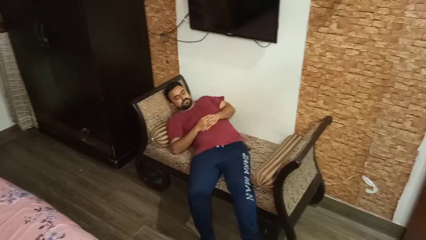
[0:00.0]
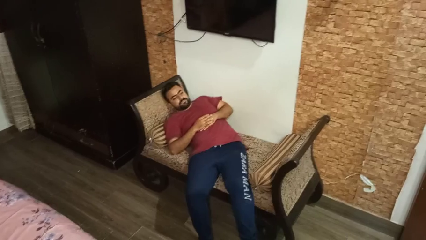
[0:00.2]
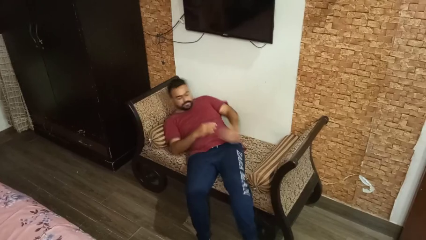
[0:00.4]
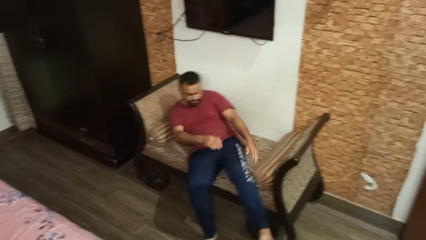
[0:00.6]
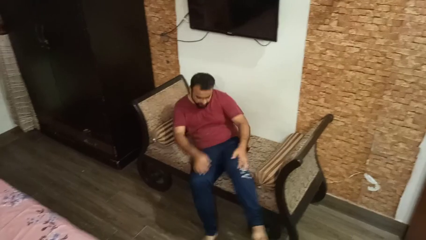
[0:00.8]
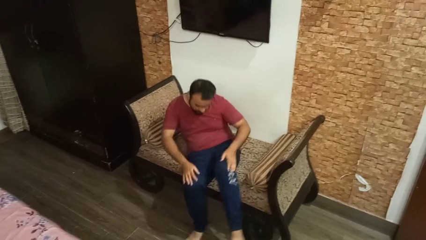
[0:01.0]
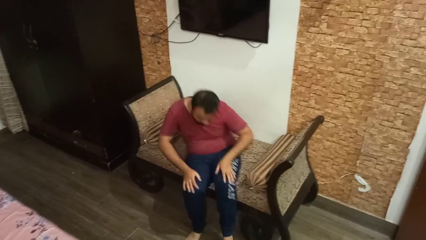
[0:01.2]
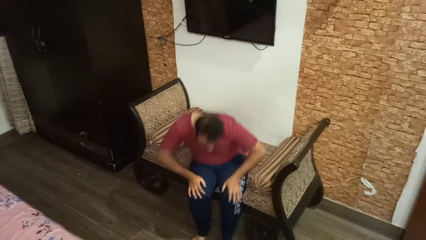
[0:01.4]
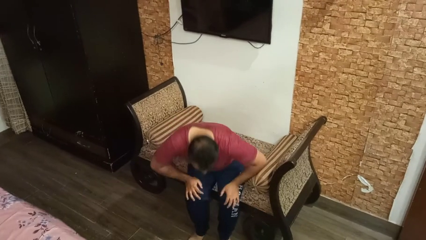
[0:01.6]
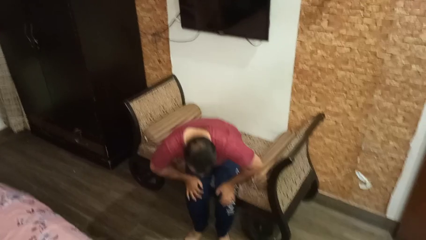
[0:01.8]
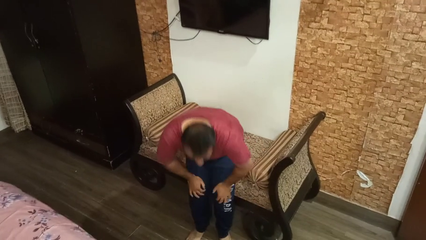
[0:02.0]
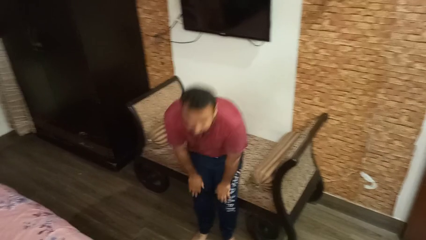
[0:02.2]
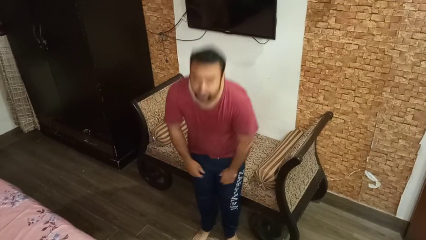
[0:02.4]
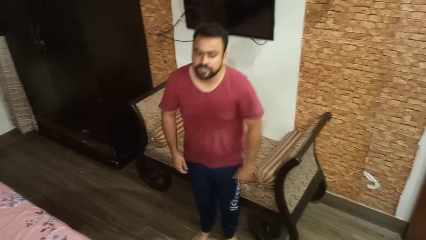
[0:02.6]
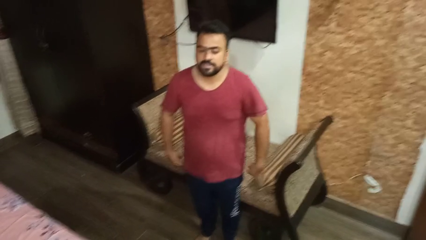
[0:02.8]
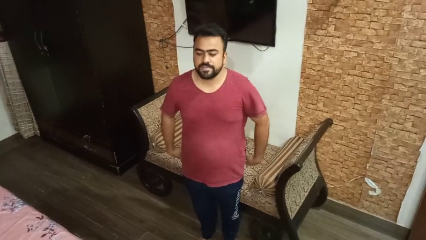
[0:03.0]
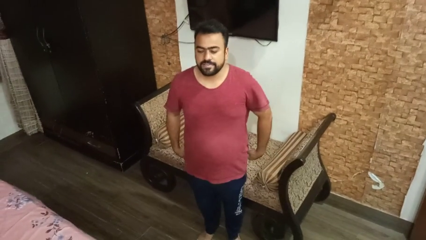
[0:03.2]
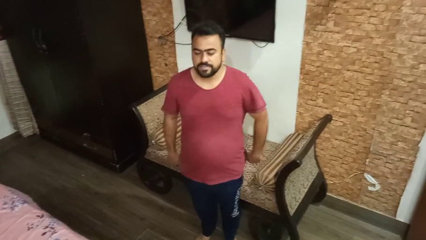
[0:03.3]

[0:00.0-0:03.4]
person stands up

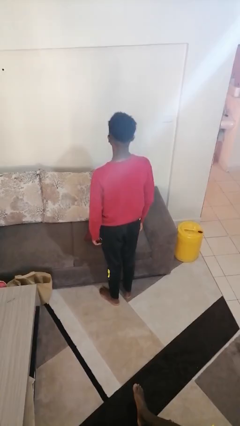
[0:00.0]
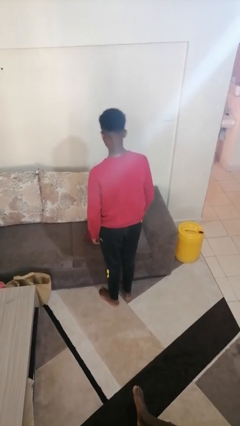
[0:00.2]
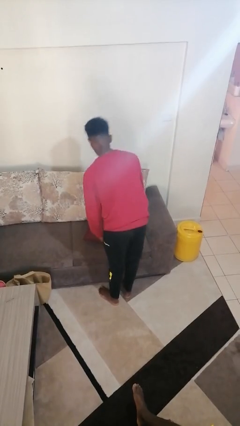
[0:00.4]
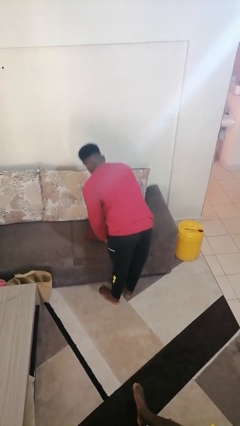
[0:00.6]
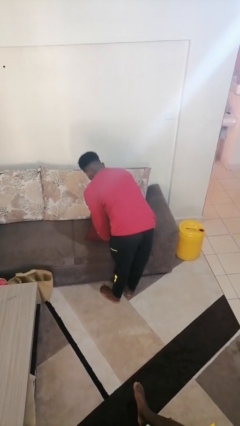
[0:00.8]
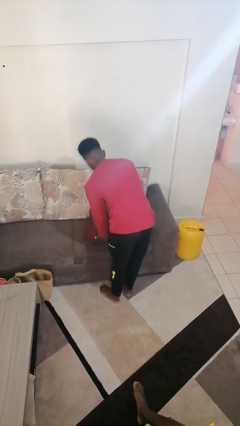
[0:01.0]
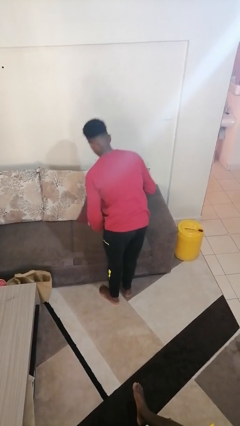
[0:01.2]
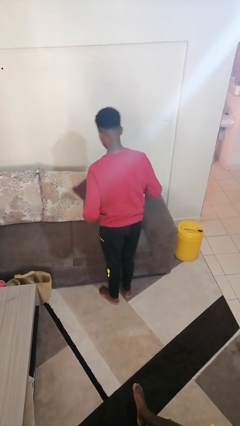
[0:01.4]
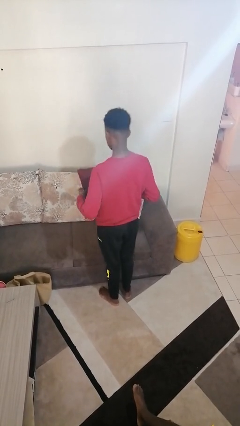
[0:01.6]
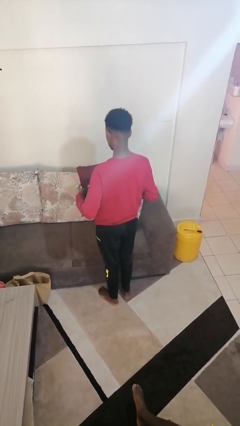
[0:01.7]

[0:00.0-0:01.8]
person picks up object from couch

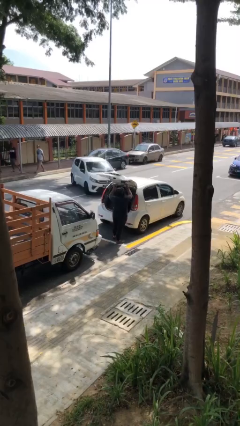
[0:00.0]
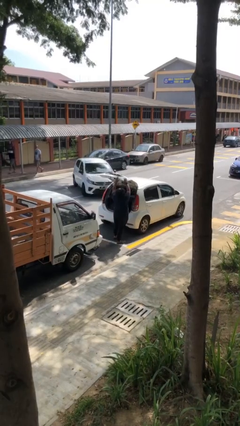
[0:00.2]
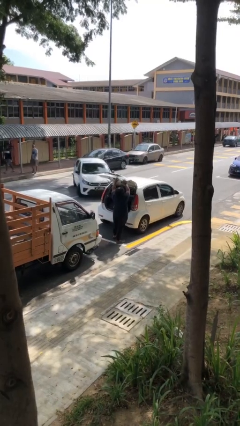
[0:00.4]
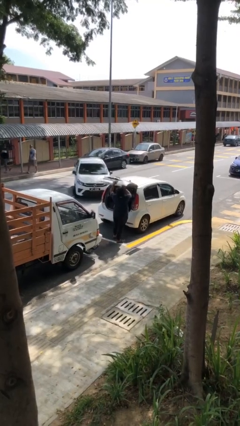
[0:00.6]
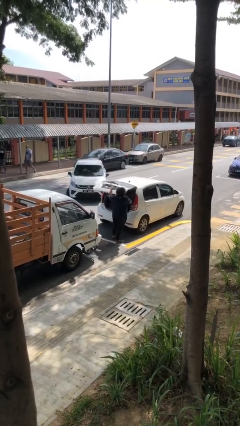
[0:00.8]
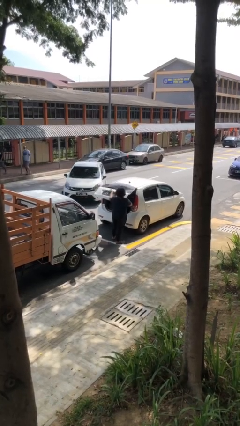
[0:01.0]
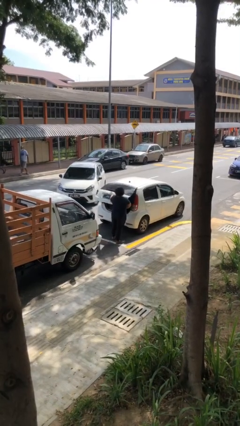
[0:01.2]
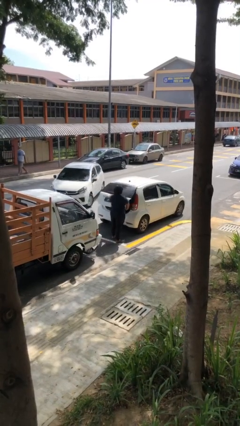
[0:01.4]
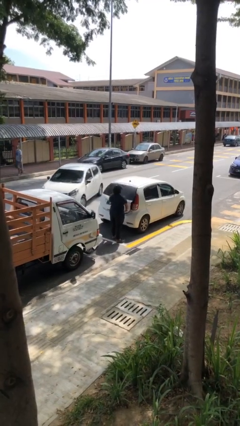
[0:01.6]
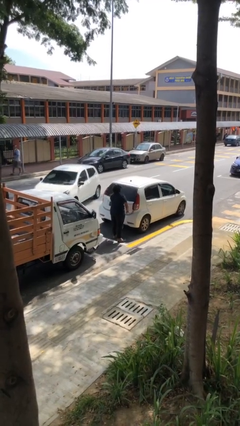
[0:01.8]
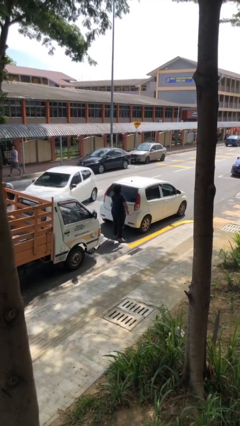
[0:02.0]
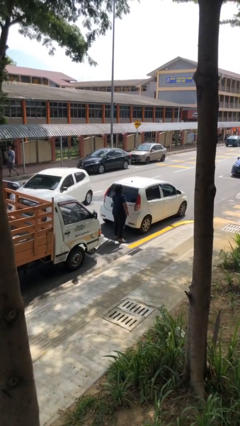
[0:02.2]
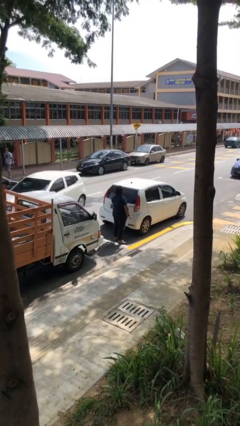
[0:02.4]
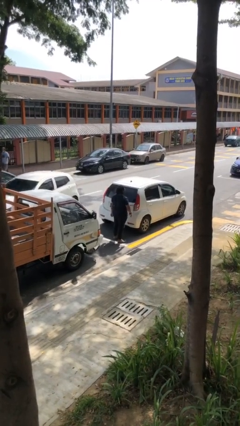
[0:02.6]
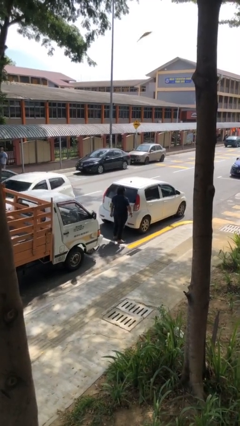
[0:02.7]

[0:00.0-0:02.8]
person closes car trunk

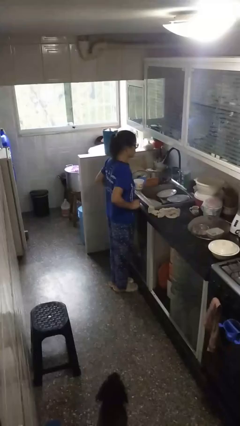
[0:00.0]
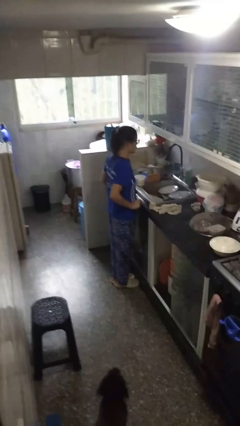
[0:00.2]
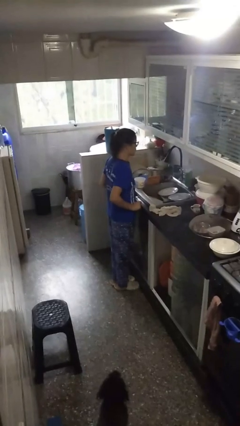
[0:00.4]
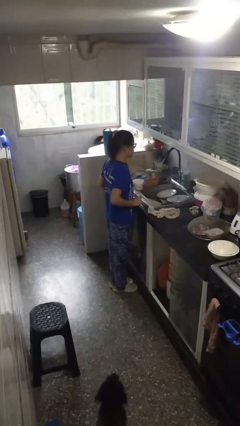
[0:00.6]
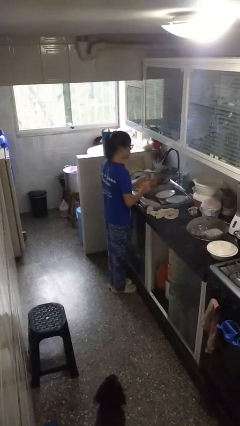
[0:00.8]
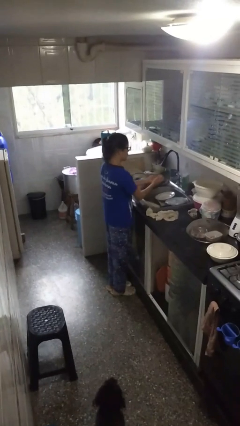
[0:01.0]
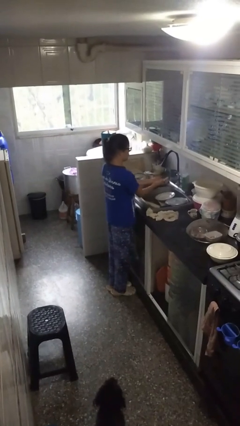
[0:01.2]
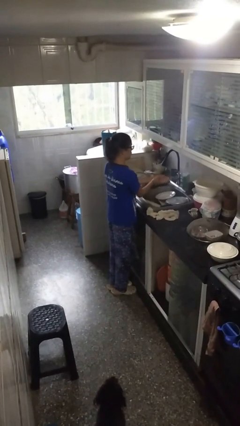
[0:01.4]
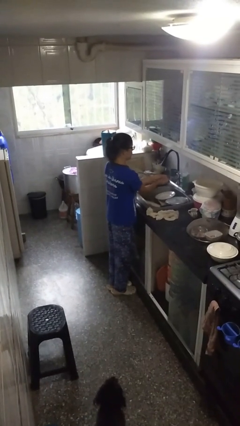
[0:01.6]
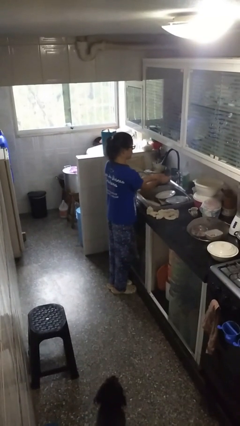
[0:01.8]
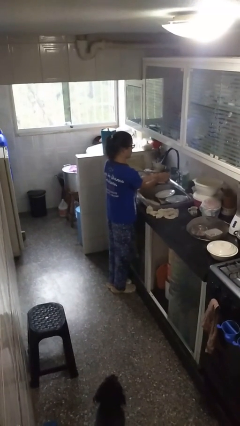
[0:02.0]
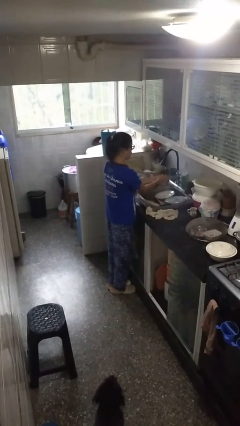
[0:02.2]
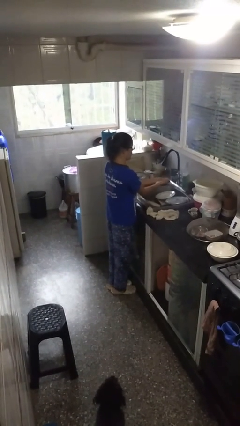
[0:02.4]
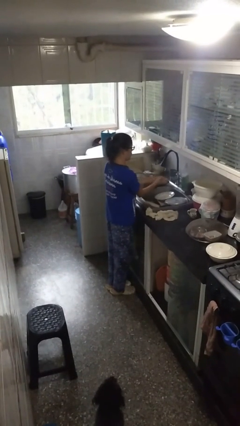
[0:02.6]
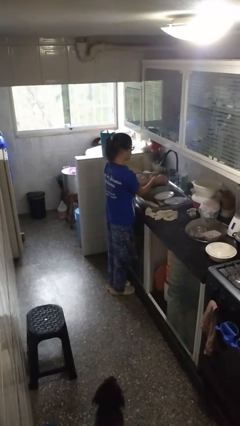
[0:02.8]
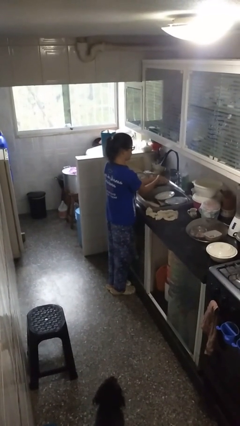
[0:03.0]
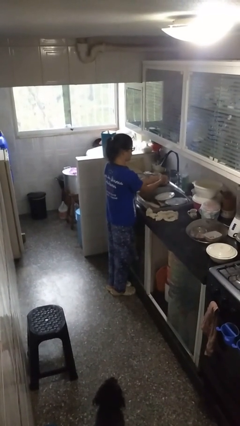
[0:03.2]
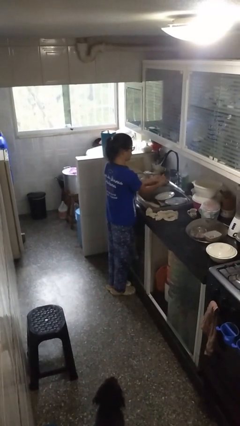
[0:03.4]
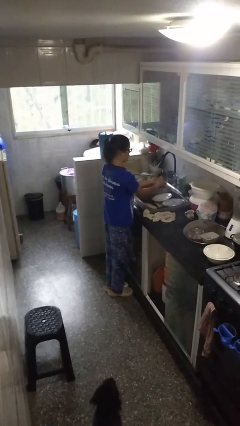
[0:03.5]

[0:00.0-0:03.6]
person washes hands

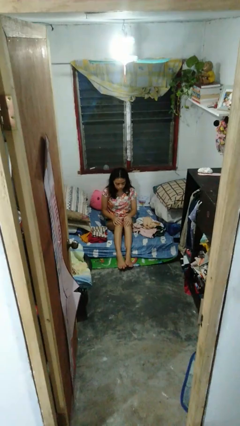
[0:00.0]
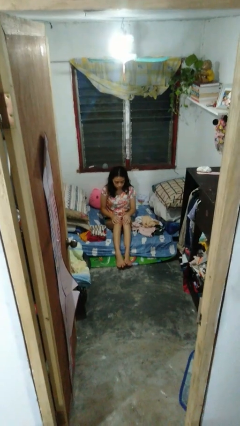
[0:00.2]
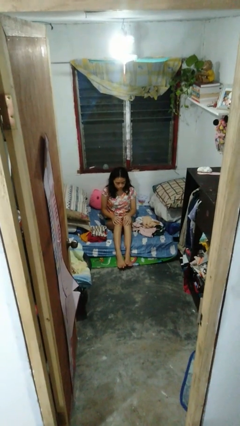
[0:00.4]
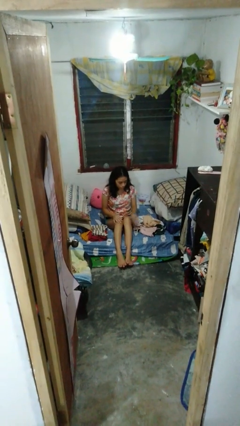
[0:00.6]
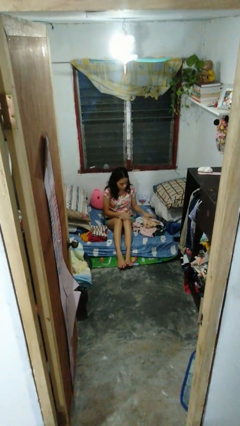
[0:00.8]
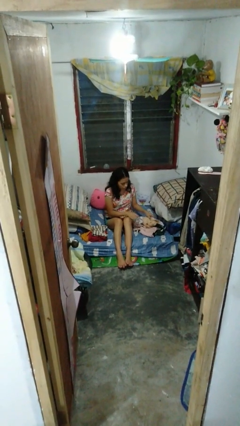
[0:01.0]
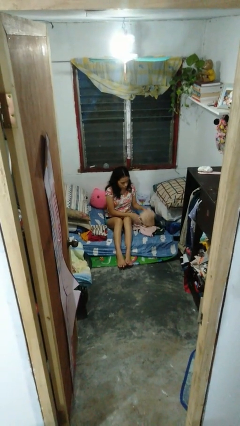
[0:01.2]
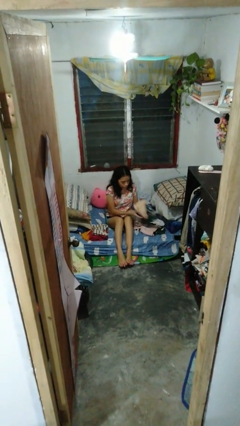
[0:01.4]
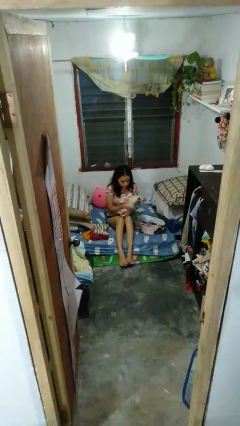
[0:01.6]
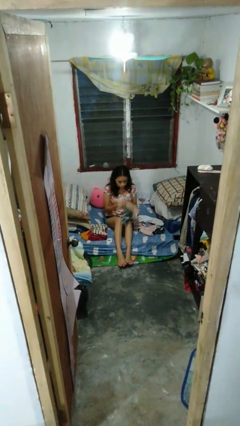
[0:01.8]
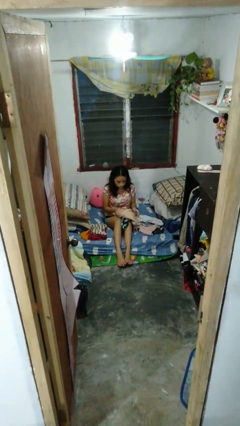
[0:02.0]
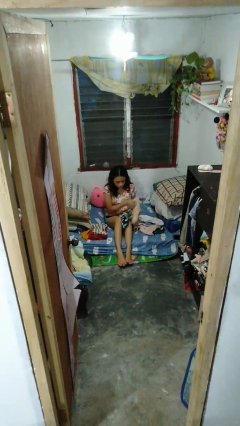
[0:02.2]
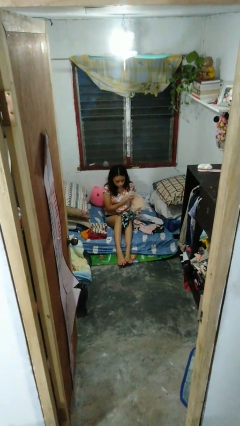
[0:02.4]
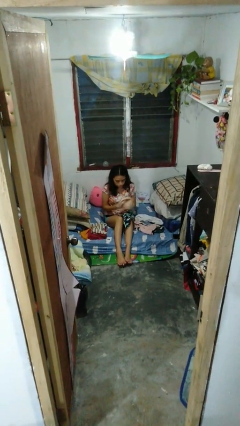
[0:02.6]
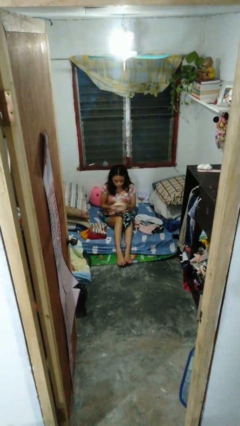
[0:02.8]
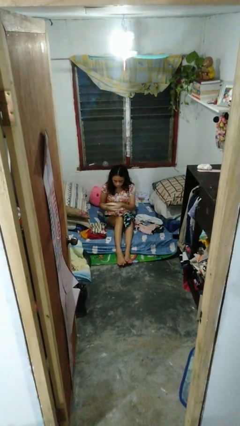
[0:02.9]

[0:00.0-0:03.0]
person folds shirt

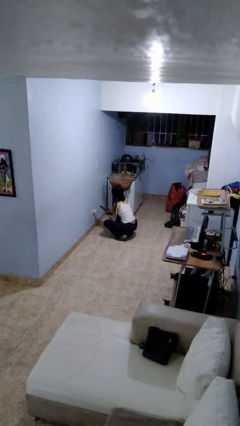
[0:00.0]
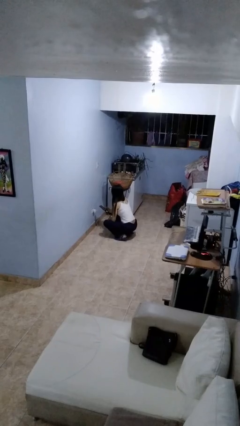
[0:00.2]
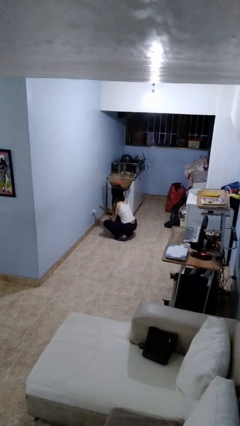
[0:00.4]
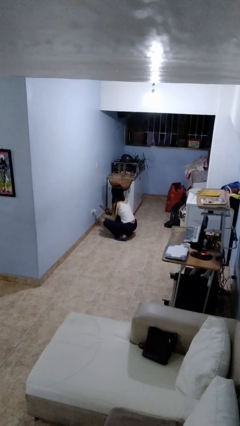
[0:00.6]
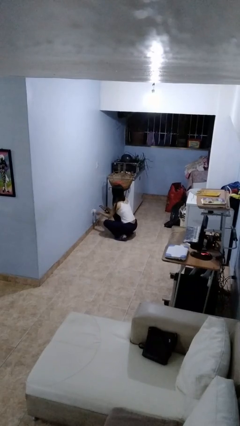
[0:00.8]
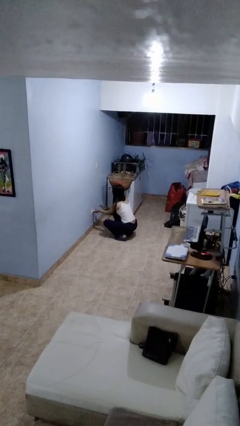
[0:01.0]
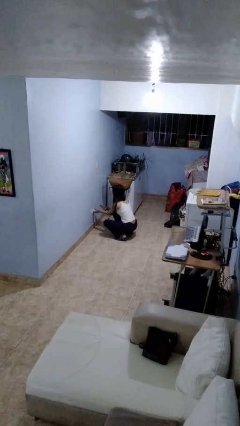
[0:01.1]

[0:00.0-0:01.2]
person unplugs from electrical socket

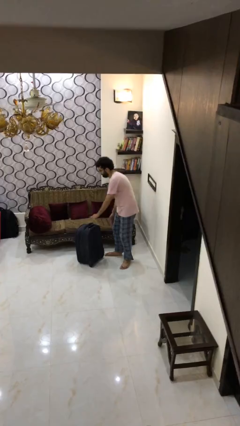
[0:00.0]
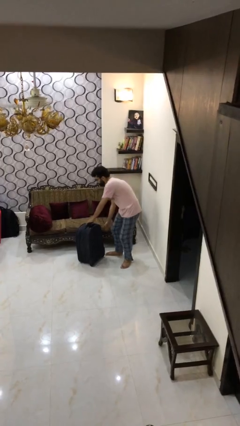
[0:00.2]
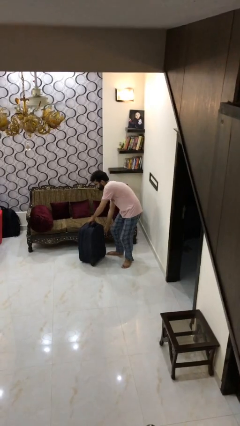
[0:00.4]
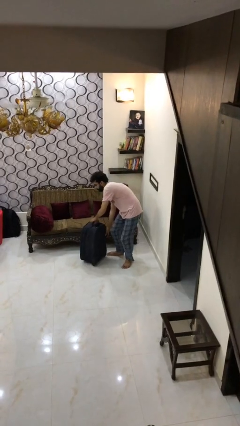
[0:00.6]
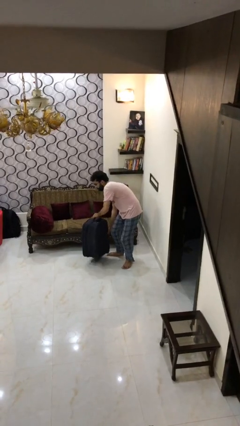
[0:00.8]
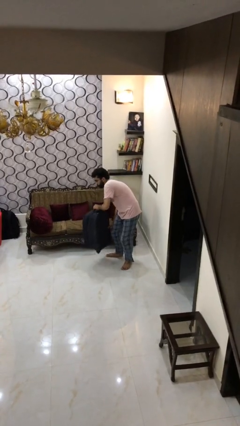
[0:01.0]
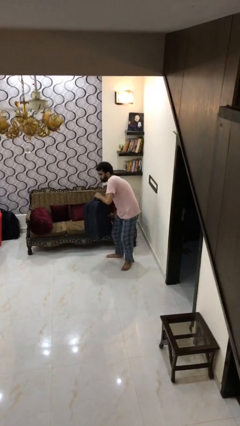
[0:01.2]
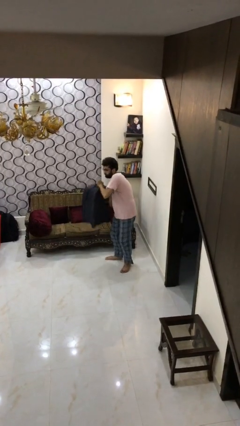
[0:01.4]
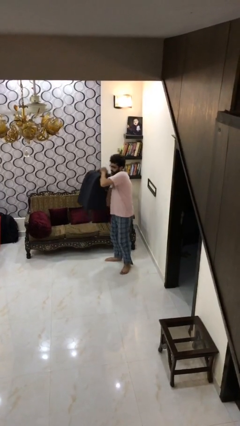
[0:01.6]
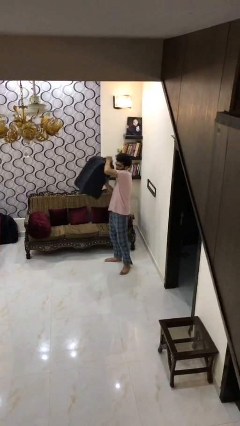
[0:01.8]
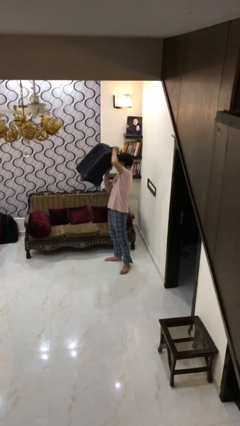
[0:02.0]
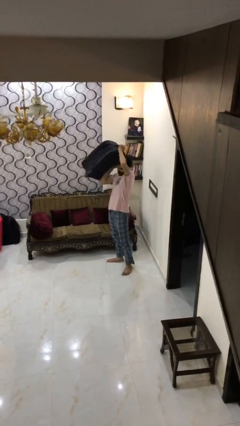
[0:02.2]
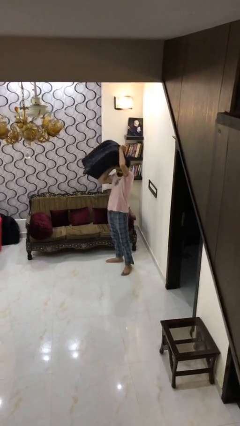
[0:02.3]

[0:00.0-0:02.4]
person picks up object from floor
